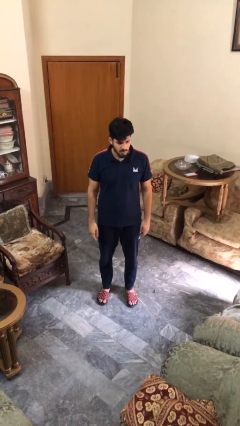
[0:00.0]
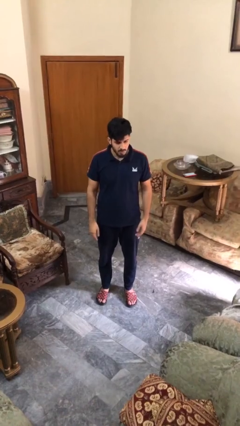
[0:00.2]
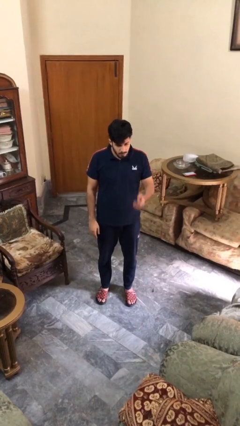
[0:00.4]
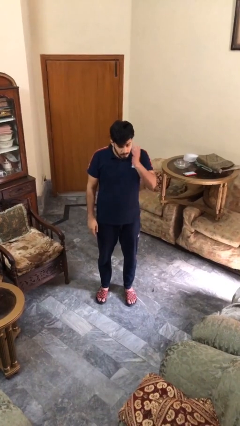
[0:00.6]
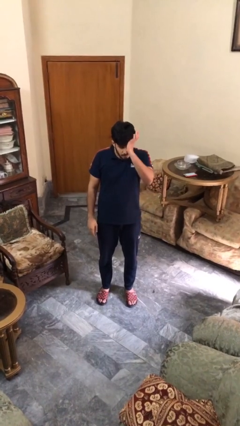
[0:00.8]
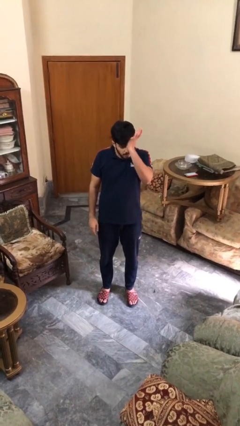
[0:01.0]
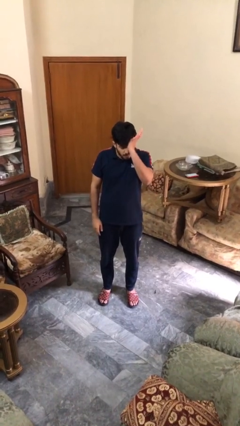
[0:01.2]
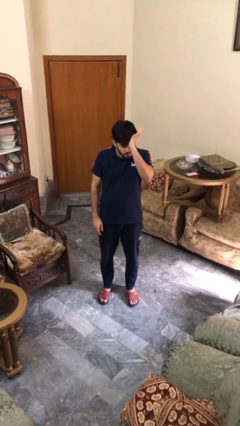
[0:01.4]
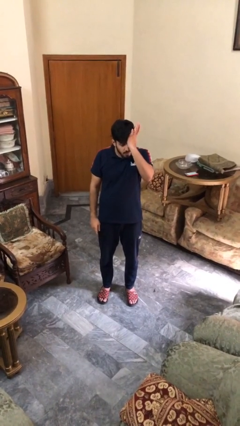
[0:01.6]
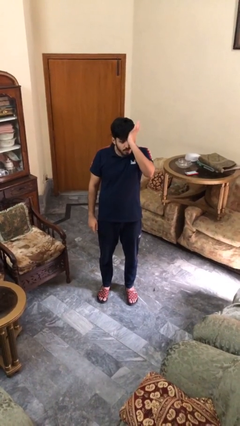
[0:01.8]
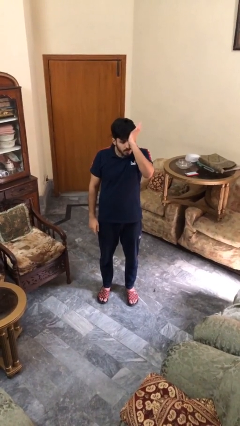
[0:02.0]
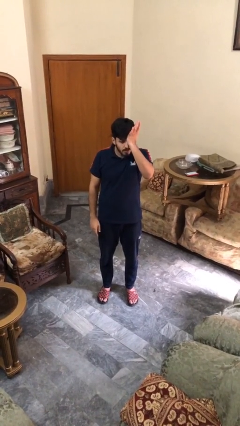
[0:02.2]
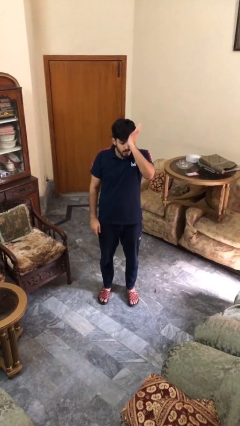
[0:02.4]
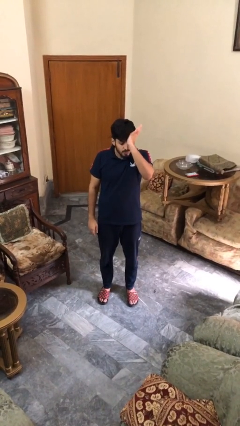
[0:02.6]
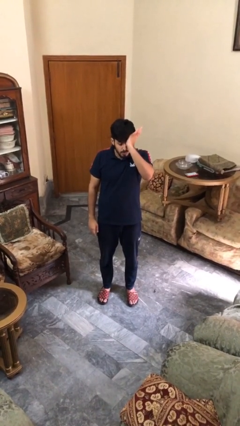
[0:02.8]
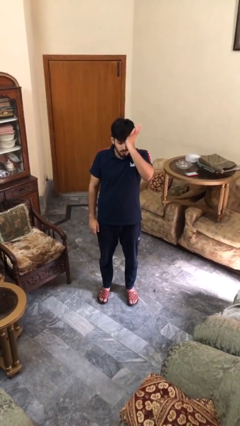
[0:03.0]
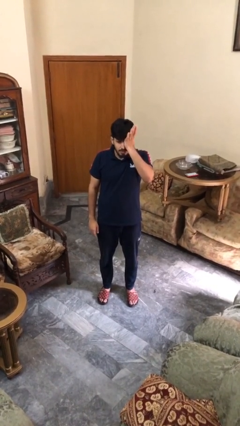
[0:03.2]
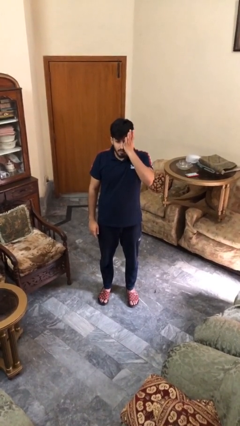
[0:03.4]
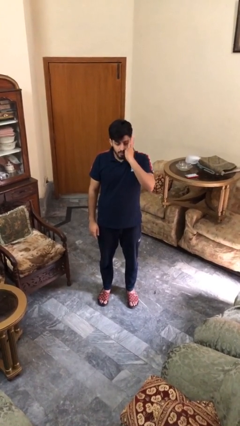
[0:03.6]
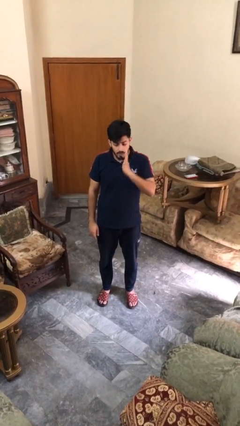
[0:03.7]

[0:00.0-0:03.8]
person rubs eyes

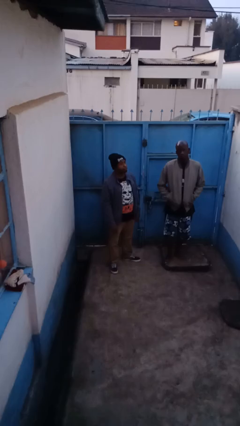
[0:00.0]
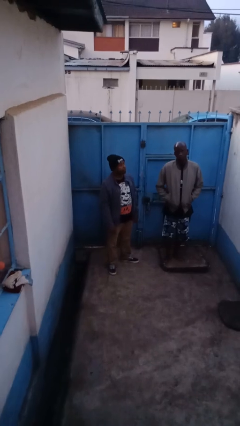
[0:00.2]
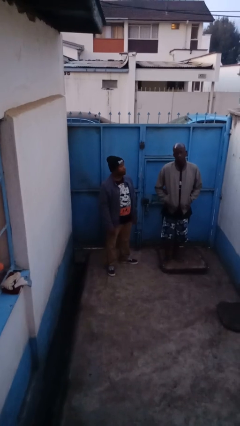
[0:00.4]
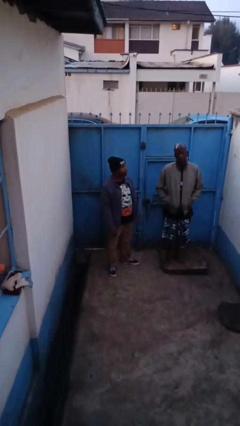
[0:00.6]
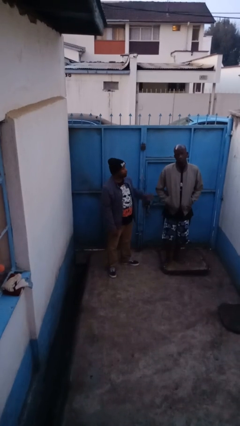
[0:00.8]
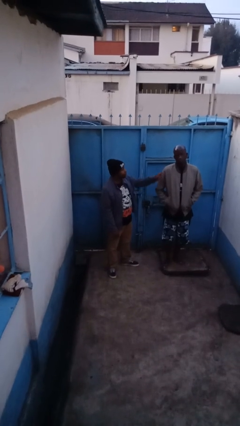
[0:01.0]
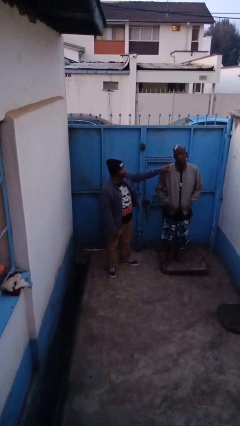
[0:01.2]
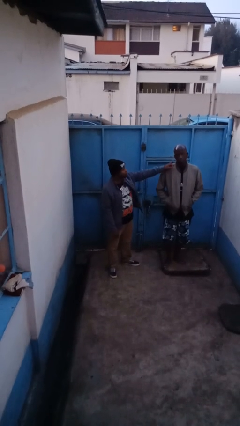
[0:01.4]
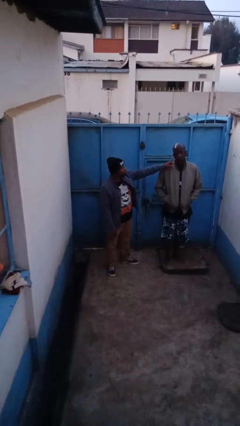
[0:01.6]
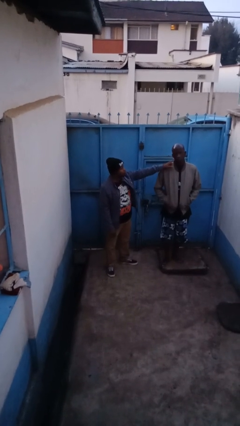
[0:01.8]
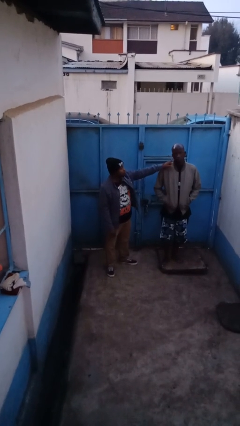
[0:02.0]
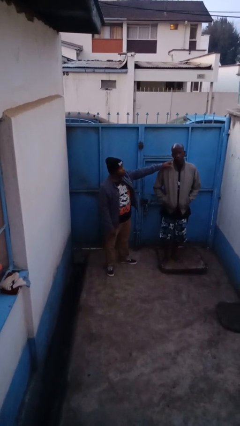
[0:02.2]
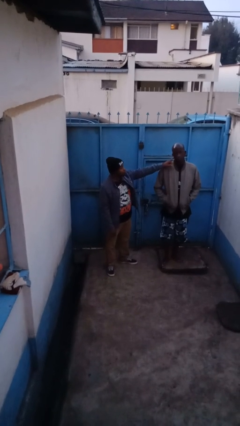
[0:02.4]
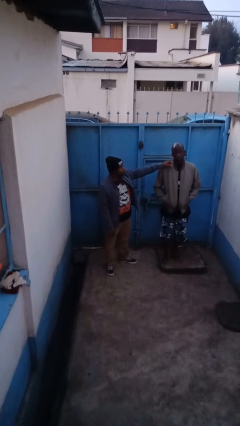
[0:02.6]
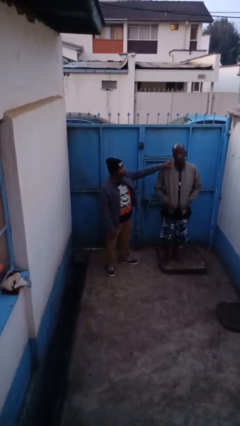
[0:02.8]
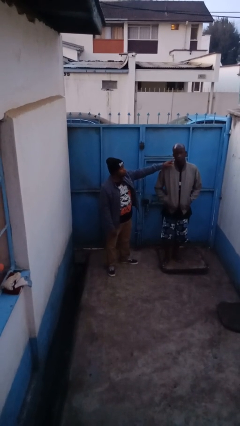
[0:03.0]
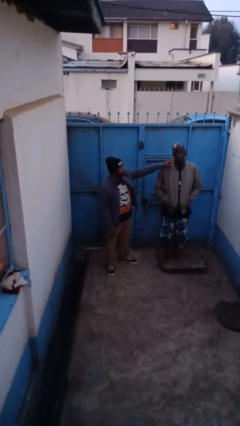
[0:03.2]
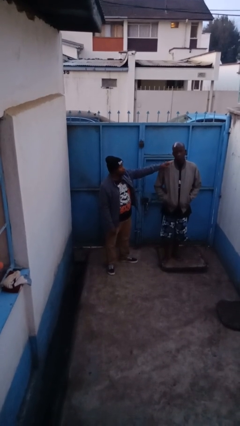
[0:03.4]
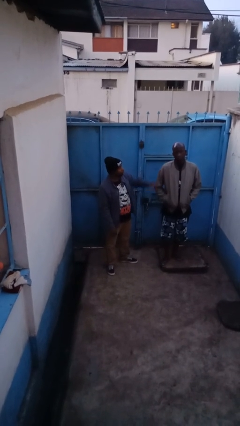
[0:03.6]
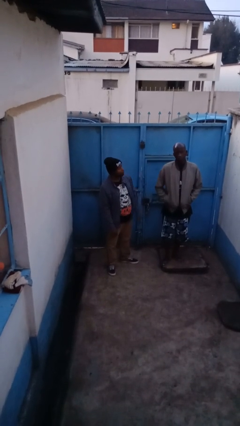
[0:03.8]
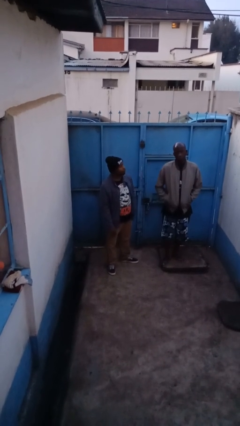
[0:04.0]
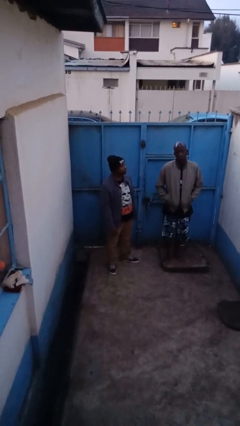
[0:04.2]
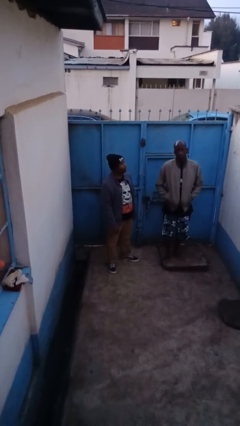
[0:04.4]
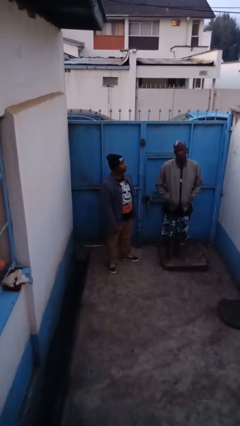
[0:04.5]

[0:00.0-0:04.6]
person touches face of person

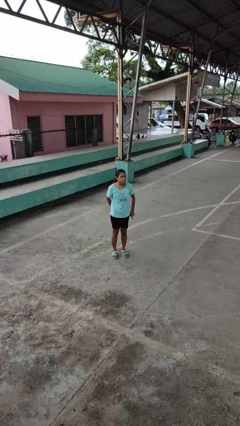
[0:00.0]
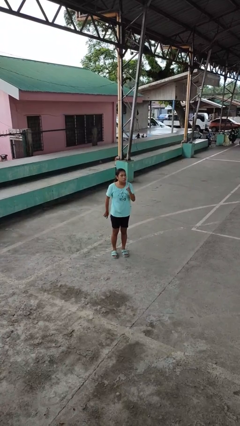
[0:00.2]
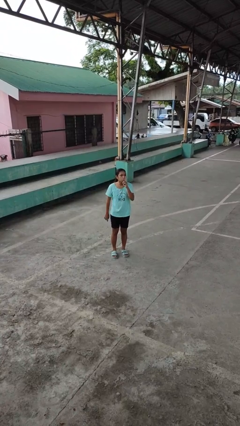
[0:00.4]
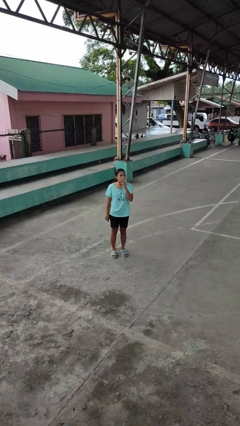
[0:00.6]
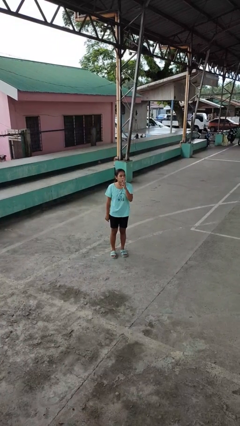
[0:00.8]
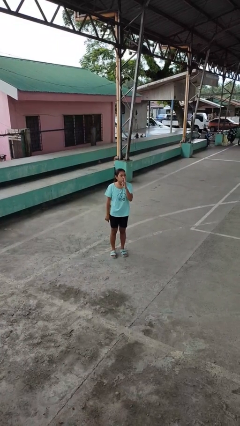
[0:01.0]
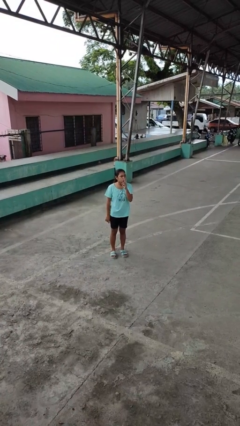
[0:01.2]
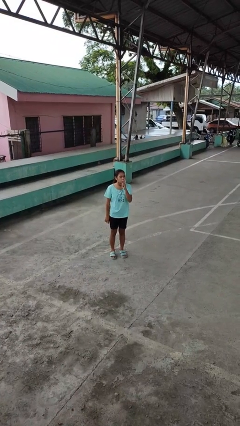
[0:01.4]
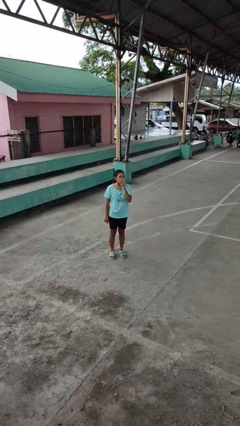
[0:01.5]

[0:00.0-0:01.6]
person gestures be quiet

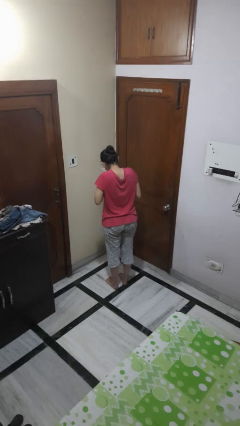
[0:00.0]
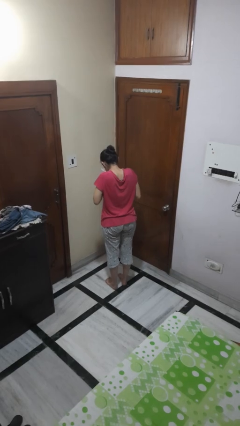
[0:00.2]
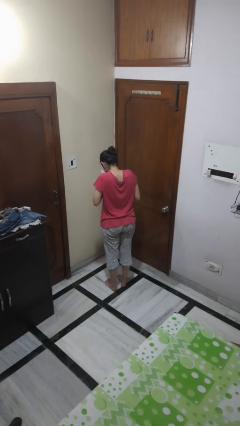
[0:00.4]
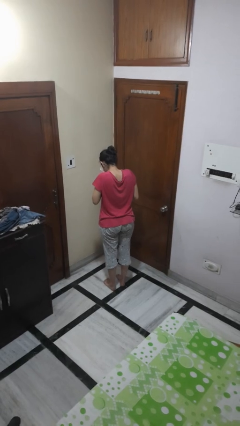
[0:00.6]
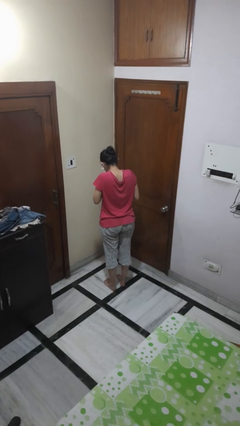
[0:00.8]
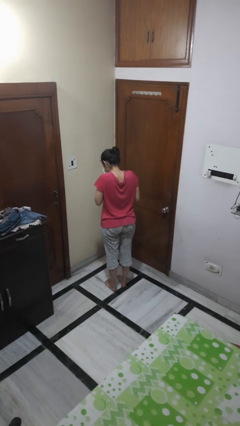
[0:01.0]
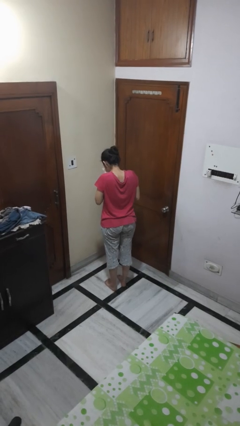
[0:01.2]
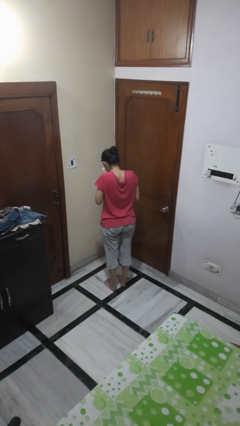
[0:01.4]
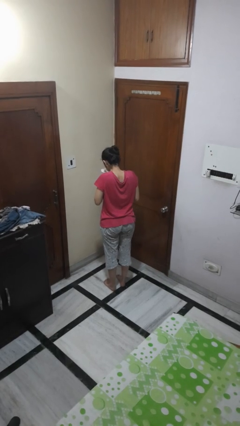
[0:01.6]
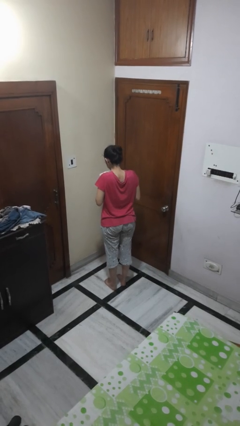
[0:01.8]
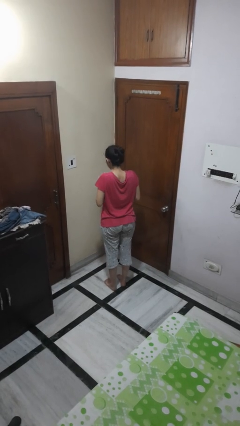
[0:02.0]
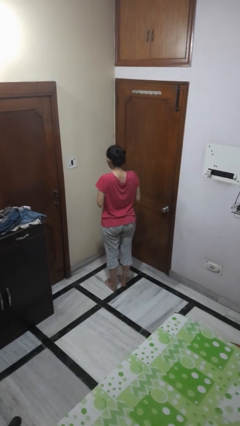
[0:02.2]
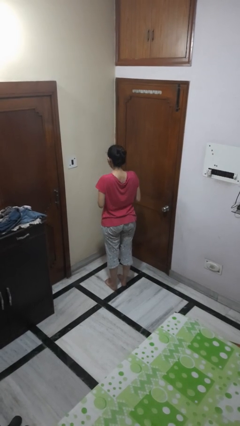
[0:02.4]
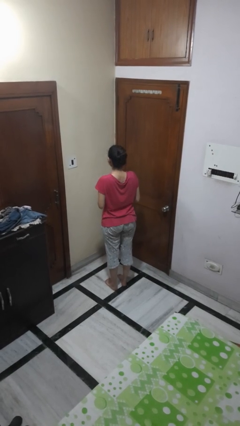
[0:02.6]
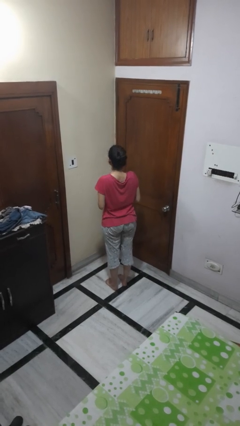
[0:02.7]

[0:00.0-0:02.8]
person blows nose

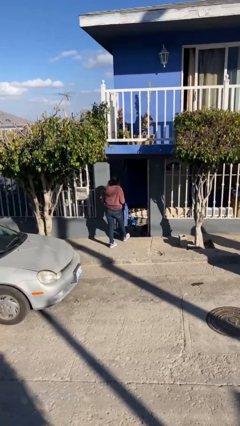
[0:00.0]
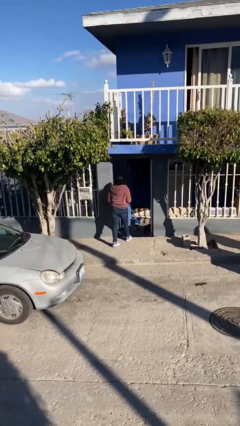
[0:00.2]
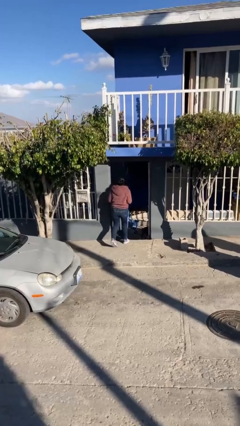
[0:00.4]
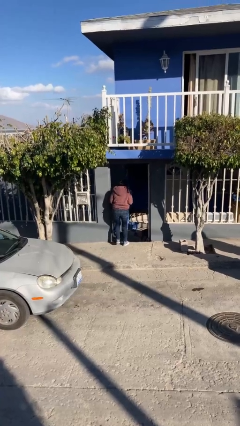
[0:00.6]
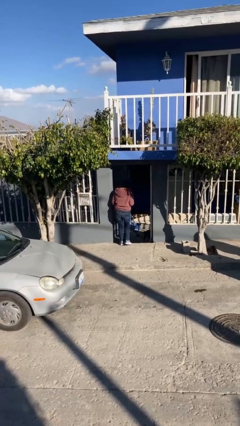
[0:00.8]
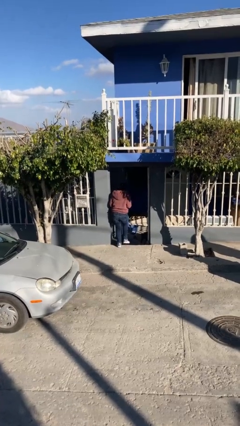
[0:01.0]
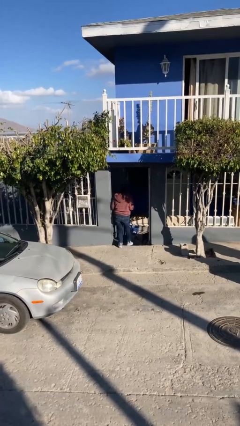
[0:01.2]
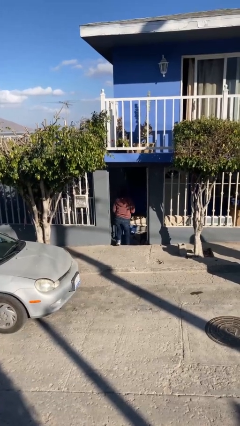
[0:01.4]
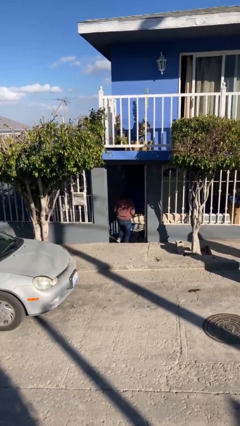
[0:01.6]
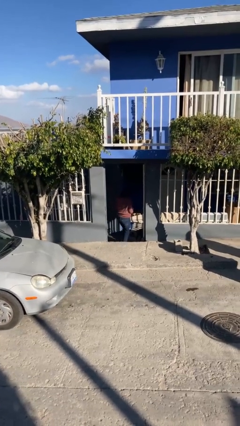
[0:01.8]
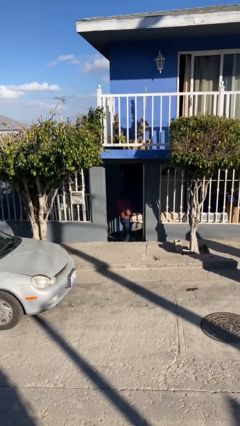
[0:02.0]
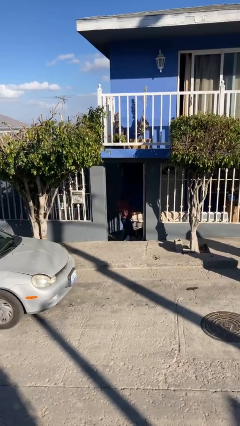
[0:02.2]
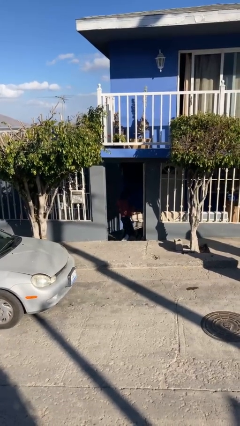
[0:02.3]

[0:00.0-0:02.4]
person exits scene through structure

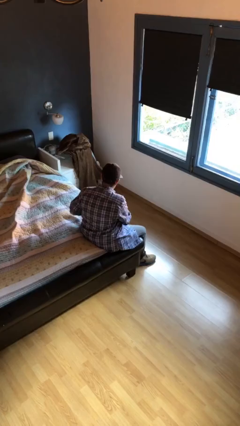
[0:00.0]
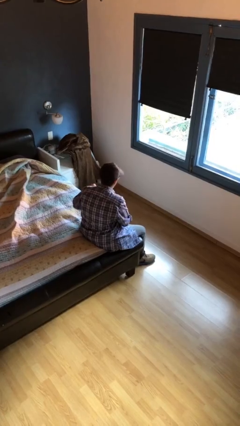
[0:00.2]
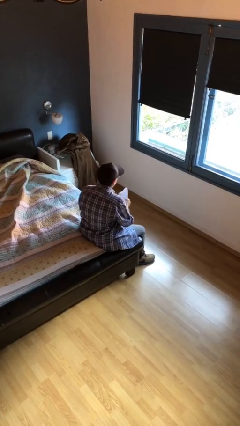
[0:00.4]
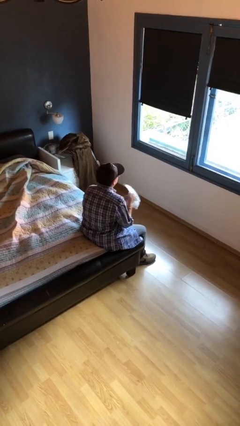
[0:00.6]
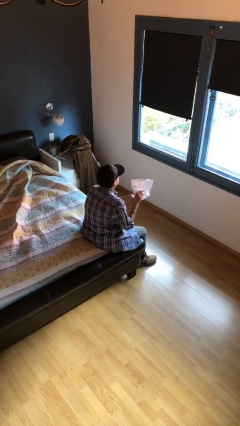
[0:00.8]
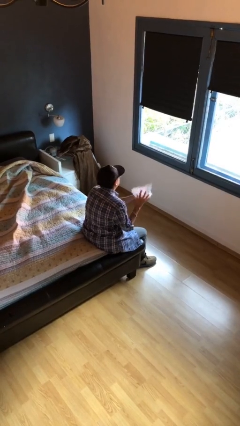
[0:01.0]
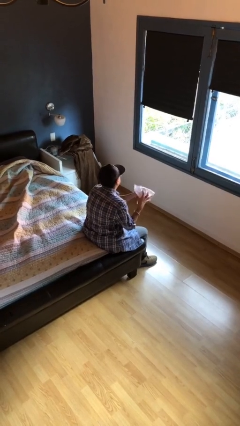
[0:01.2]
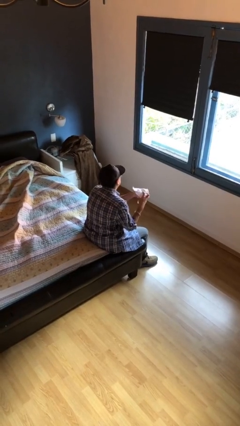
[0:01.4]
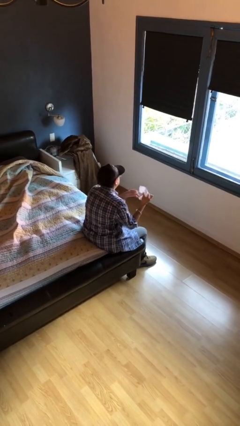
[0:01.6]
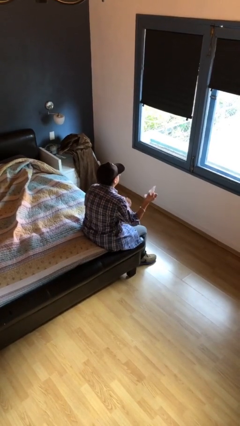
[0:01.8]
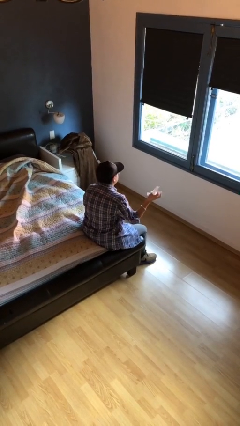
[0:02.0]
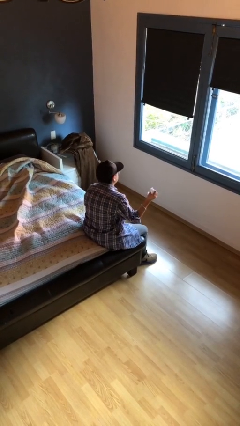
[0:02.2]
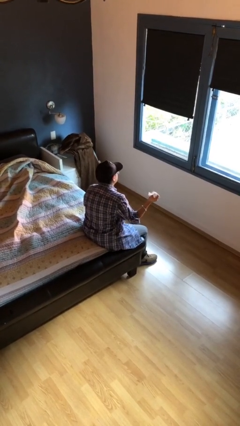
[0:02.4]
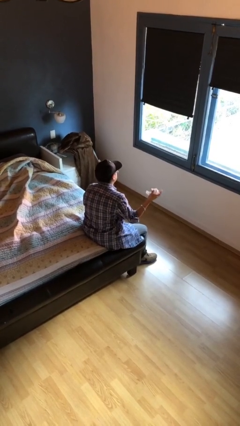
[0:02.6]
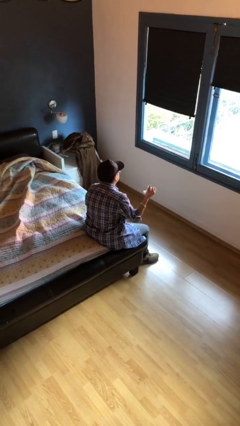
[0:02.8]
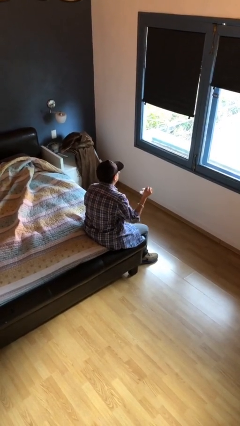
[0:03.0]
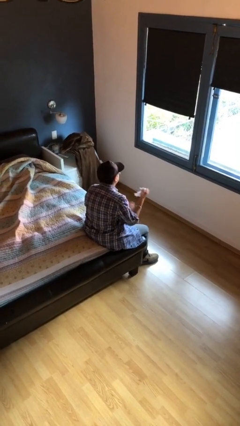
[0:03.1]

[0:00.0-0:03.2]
person crumples paper
